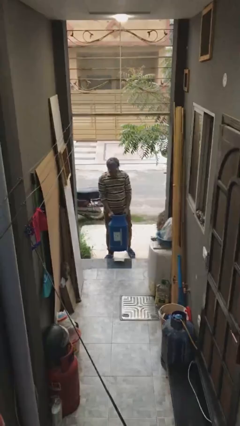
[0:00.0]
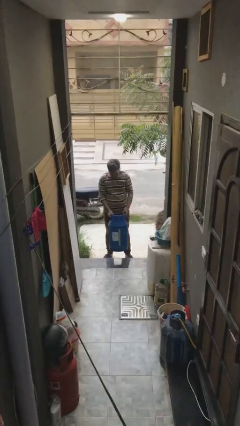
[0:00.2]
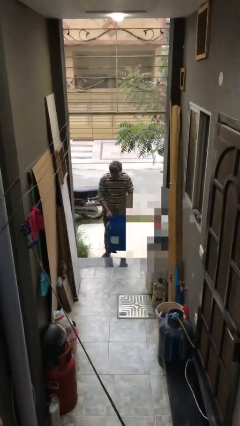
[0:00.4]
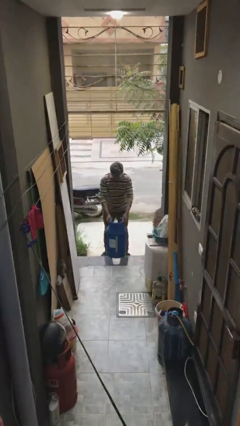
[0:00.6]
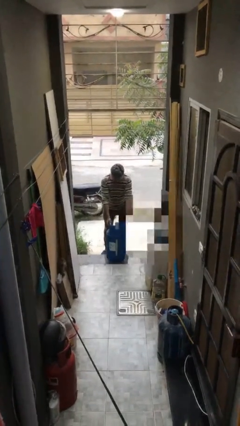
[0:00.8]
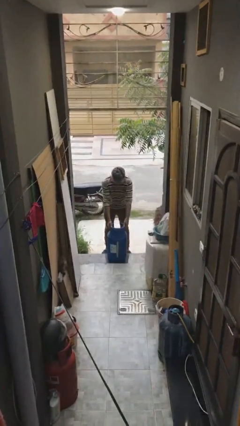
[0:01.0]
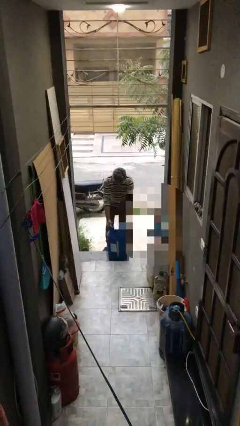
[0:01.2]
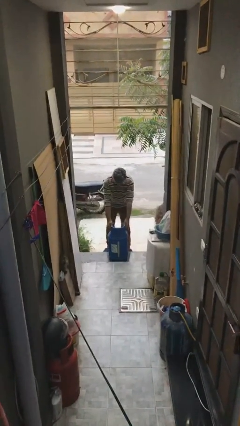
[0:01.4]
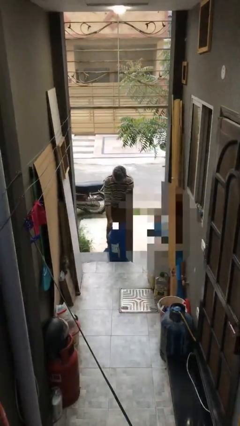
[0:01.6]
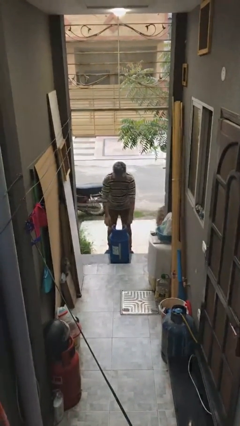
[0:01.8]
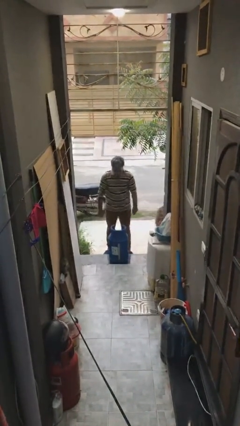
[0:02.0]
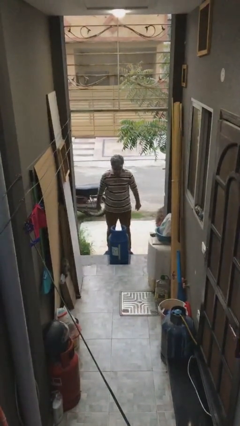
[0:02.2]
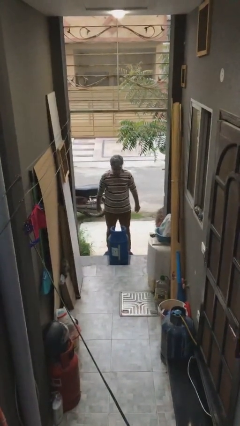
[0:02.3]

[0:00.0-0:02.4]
person puts down object on floor

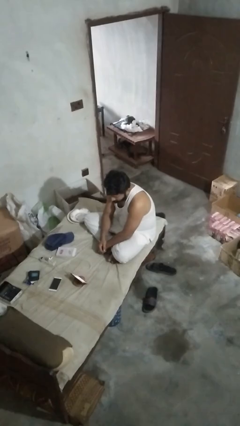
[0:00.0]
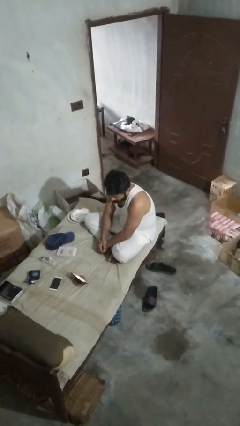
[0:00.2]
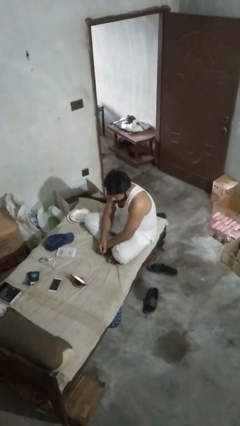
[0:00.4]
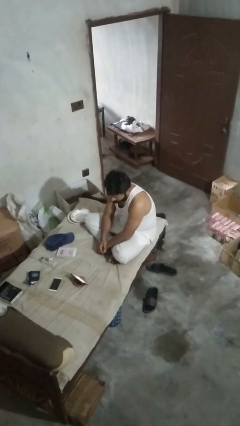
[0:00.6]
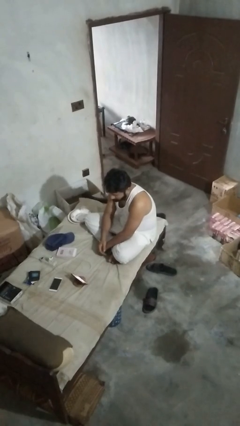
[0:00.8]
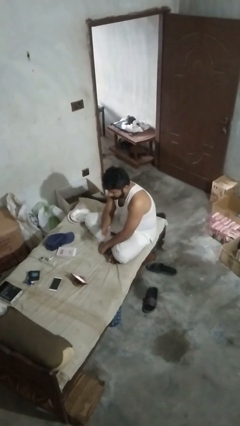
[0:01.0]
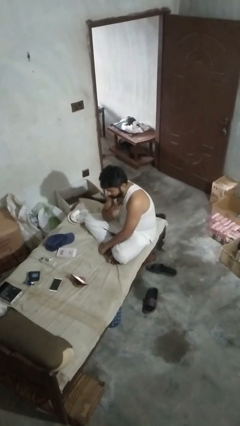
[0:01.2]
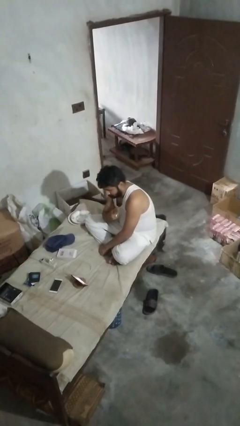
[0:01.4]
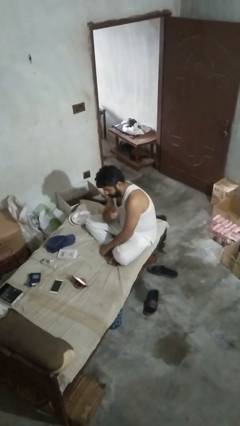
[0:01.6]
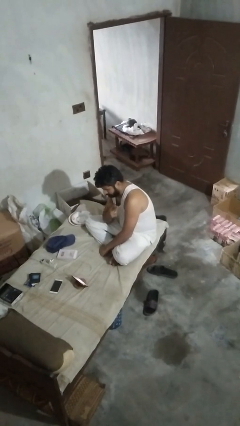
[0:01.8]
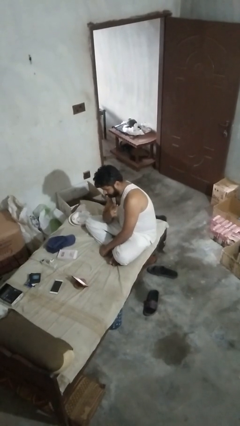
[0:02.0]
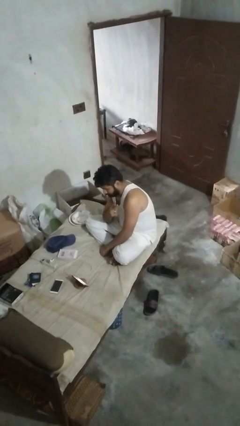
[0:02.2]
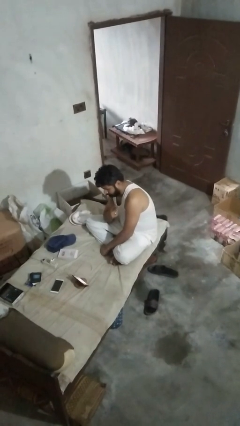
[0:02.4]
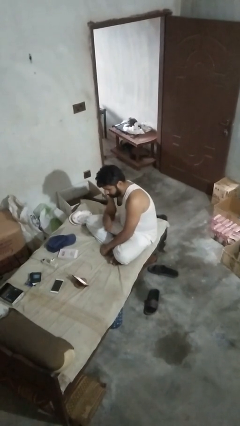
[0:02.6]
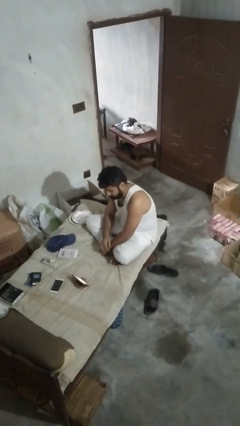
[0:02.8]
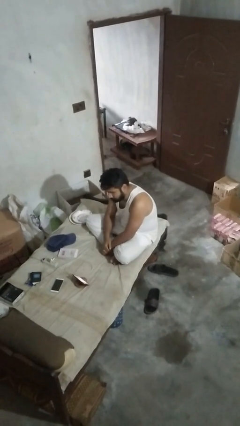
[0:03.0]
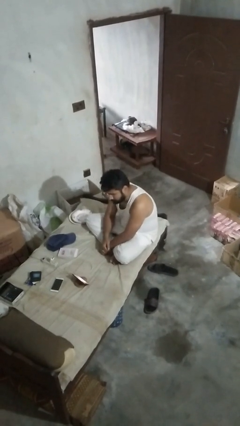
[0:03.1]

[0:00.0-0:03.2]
person gestures peace

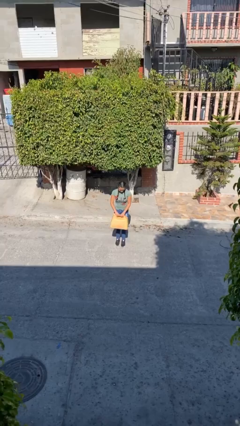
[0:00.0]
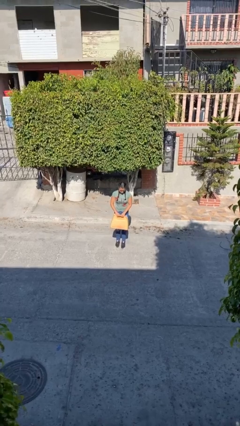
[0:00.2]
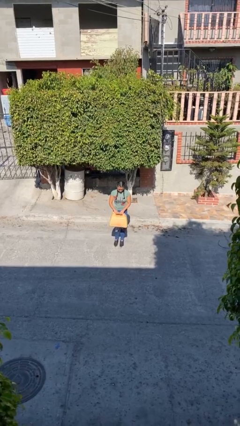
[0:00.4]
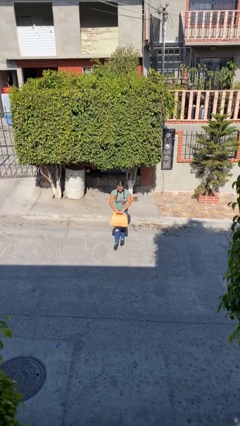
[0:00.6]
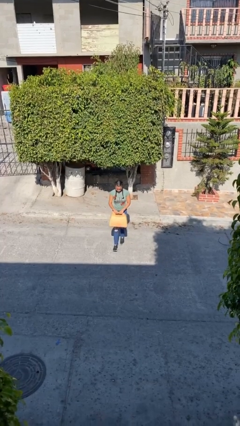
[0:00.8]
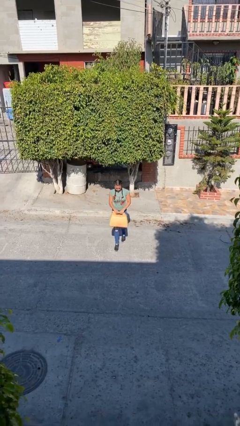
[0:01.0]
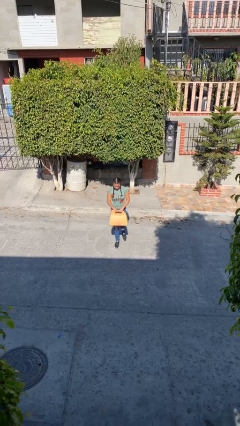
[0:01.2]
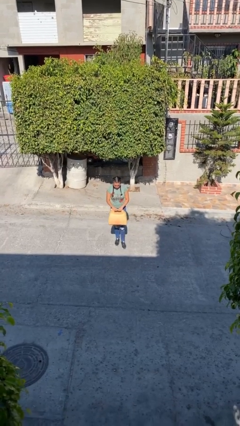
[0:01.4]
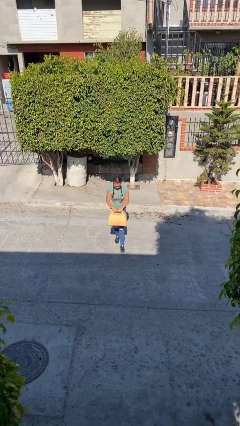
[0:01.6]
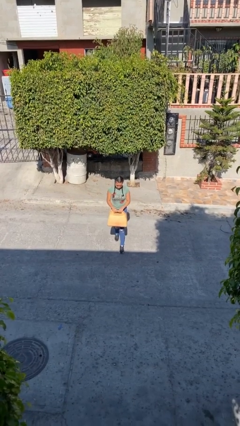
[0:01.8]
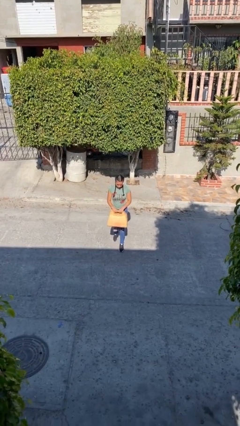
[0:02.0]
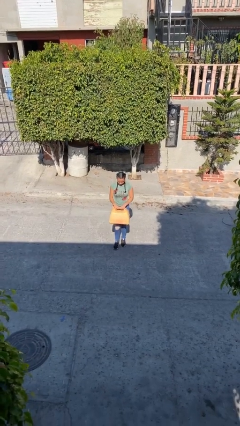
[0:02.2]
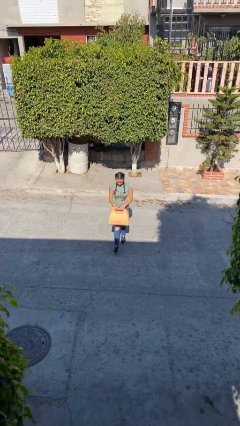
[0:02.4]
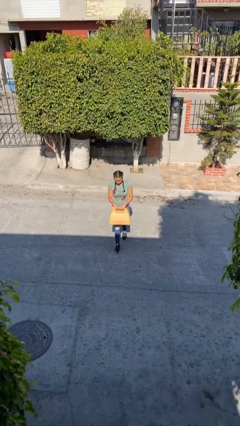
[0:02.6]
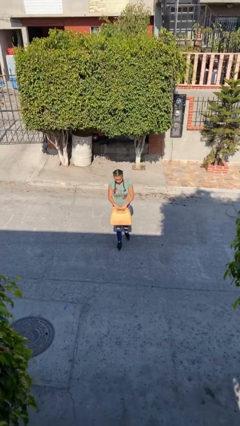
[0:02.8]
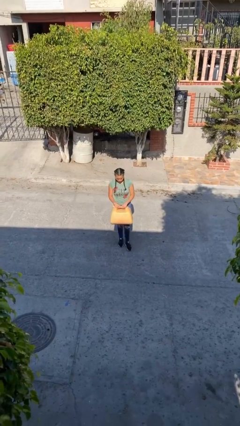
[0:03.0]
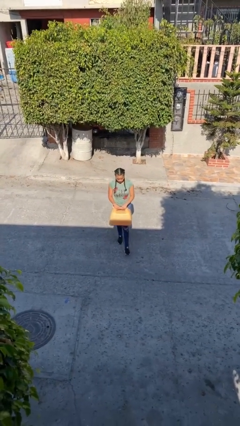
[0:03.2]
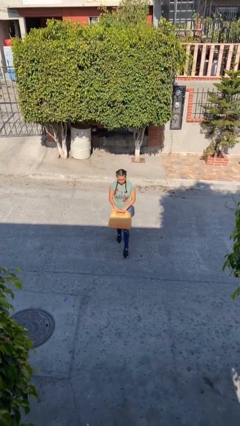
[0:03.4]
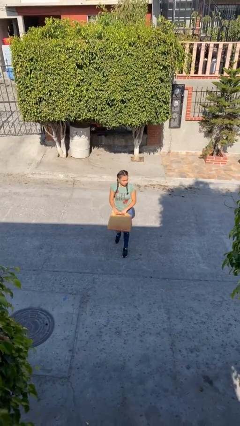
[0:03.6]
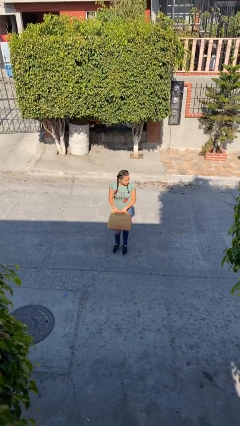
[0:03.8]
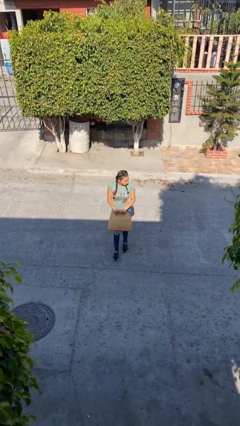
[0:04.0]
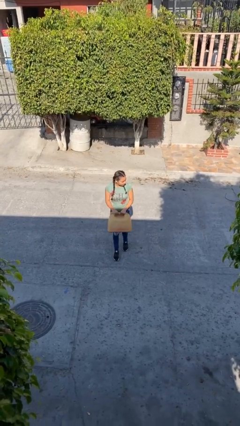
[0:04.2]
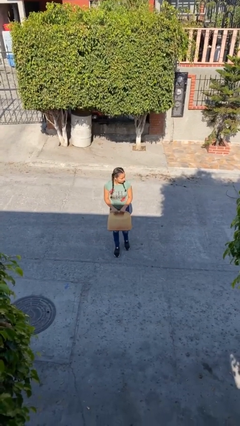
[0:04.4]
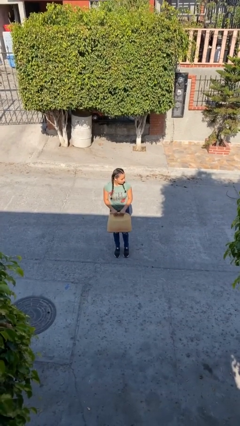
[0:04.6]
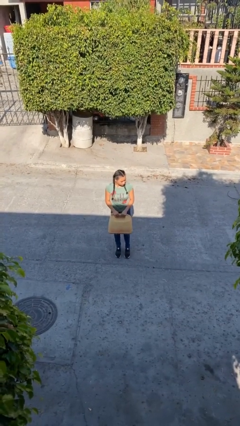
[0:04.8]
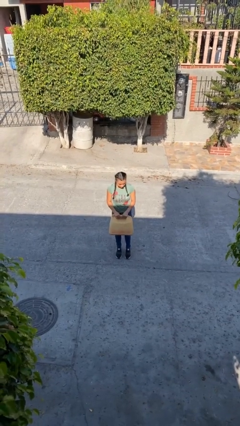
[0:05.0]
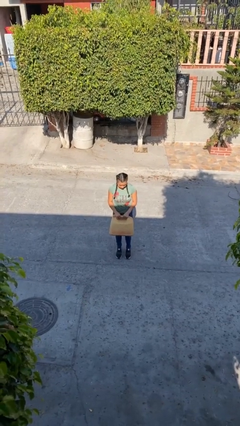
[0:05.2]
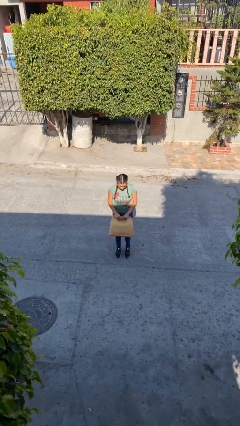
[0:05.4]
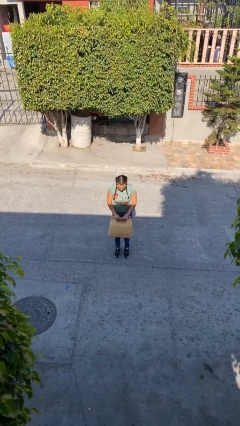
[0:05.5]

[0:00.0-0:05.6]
person carries heavy object

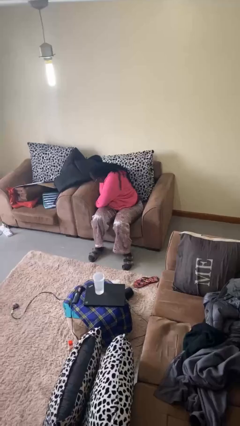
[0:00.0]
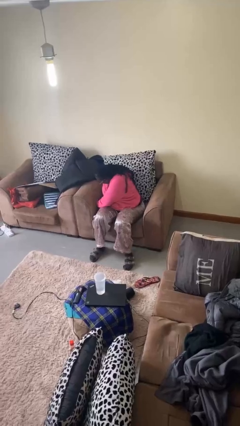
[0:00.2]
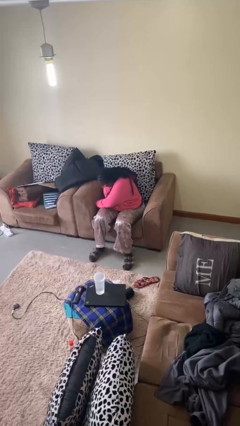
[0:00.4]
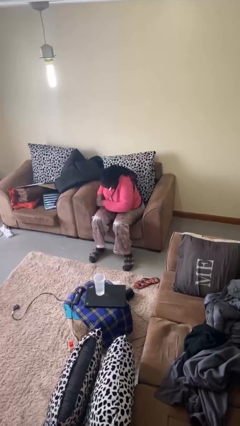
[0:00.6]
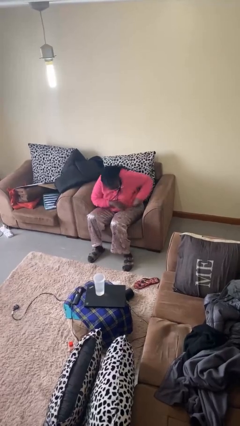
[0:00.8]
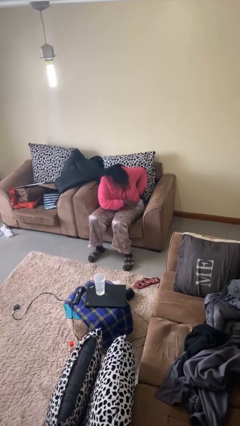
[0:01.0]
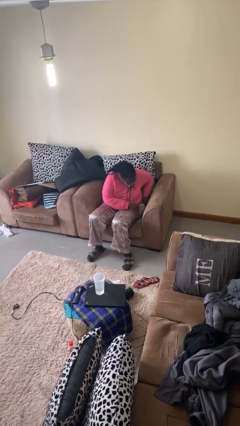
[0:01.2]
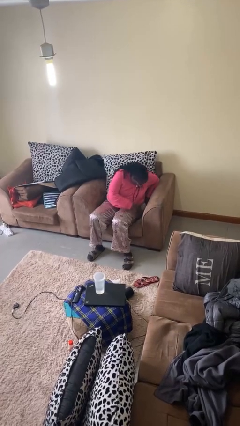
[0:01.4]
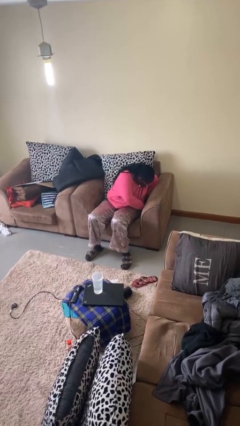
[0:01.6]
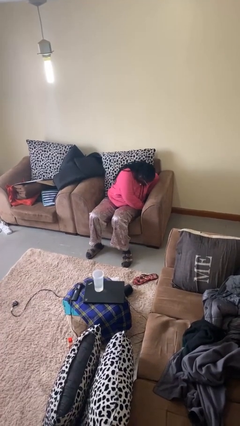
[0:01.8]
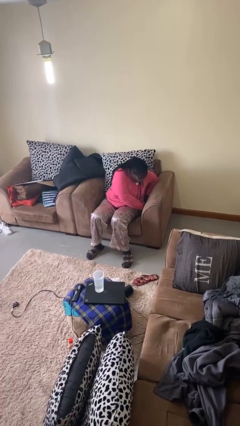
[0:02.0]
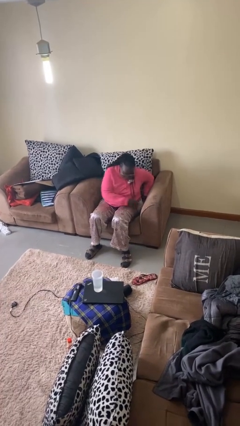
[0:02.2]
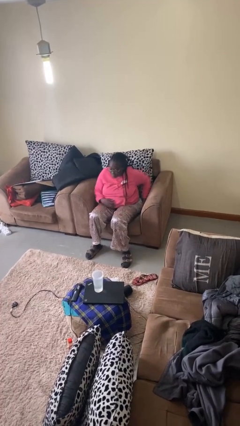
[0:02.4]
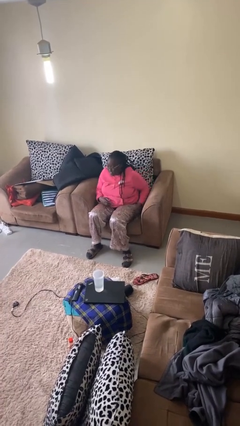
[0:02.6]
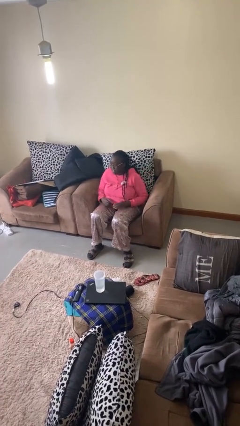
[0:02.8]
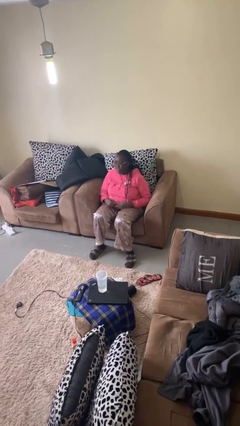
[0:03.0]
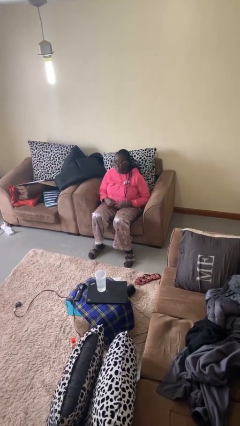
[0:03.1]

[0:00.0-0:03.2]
person searches in couch

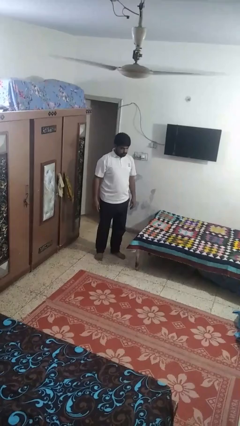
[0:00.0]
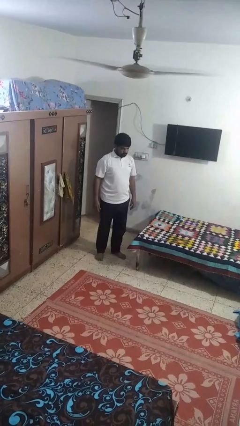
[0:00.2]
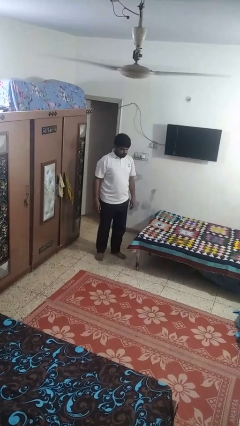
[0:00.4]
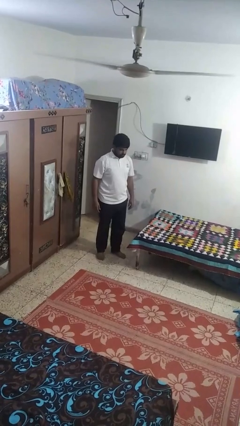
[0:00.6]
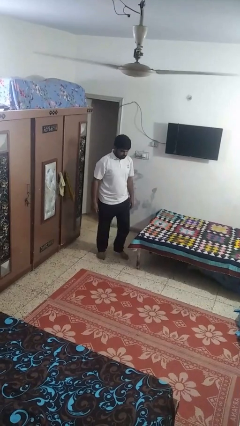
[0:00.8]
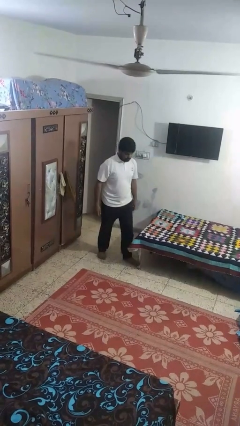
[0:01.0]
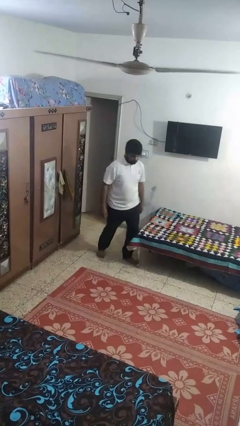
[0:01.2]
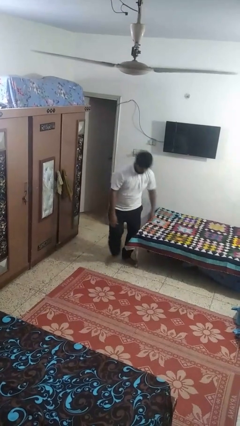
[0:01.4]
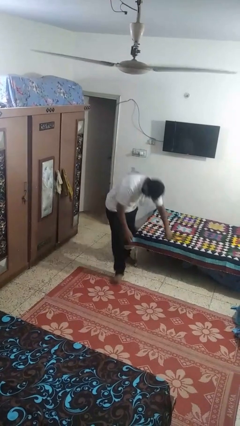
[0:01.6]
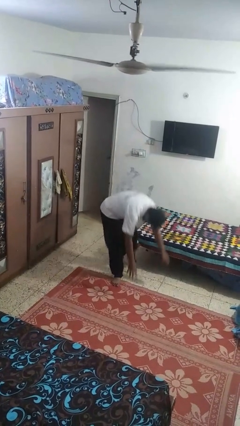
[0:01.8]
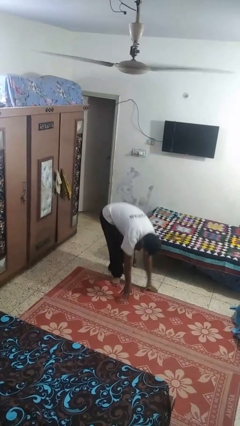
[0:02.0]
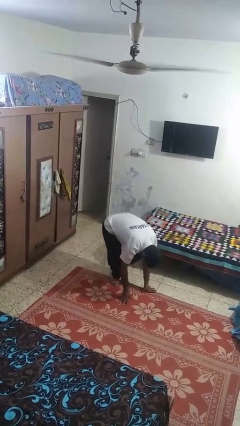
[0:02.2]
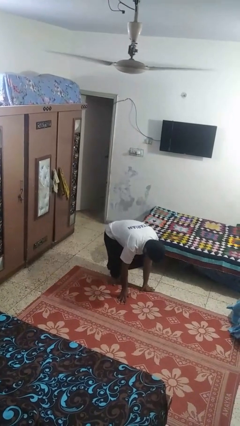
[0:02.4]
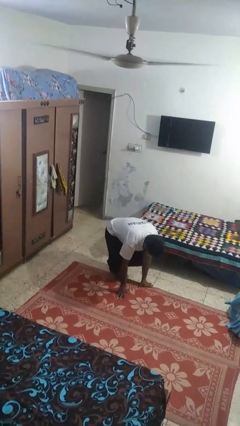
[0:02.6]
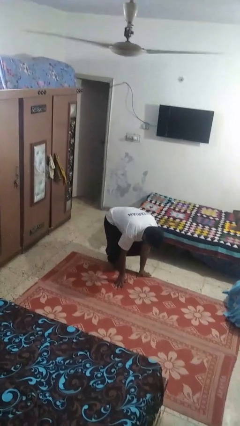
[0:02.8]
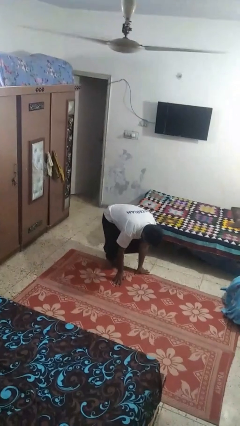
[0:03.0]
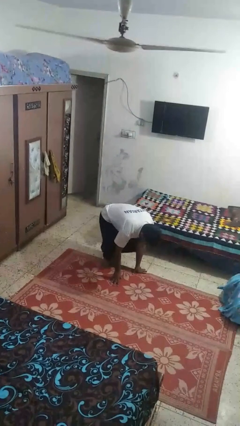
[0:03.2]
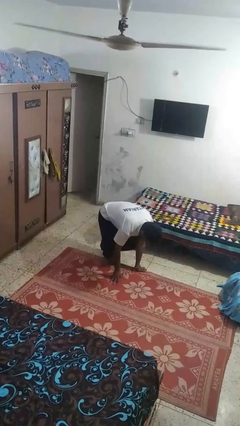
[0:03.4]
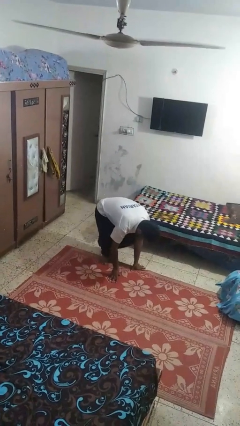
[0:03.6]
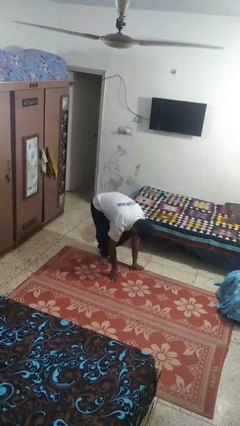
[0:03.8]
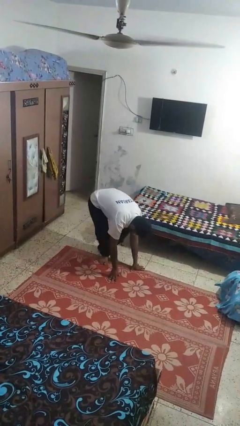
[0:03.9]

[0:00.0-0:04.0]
person trips on object on floor
